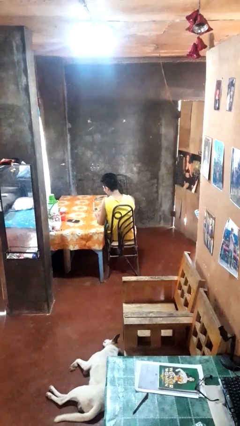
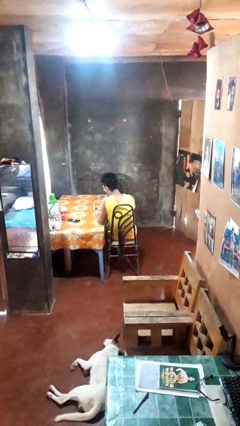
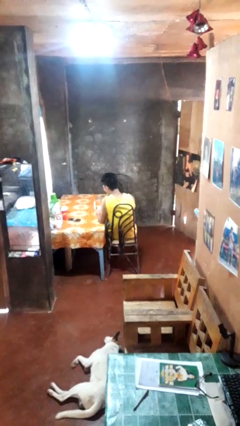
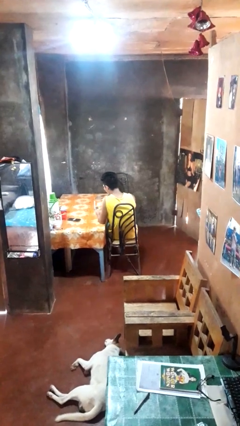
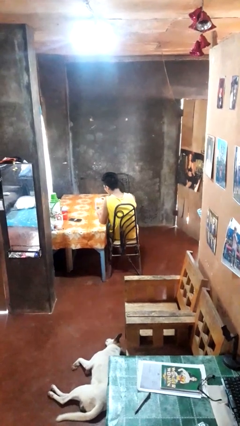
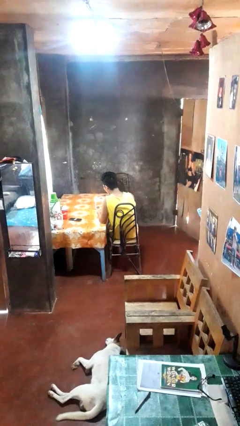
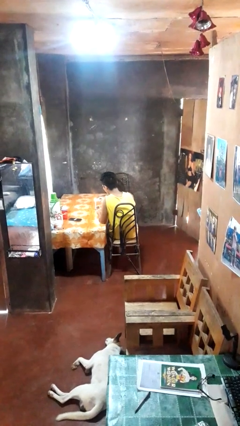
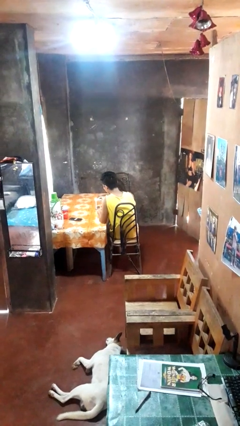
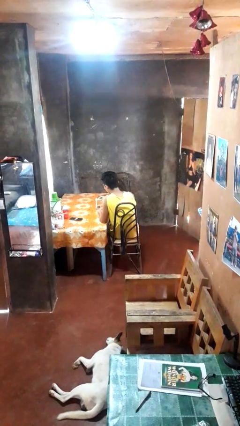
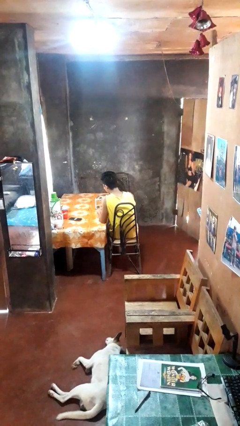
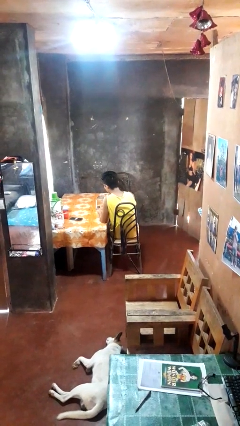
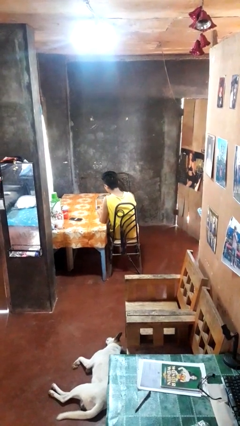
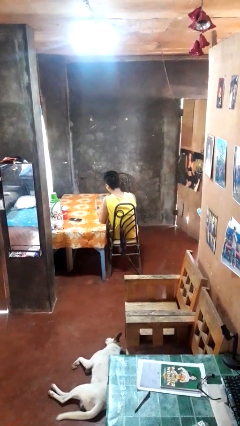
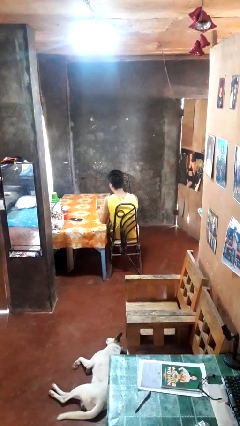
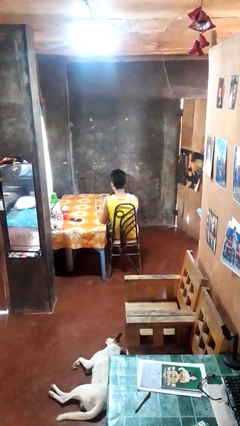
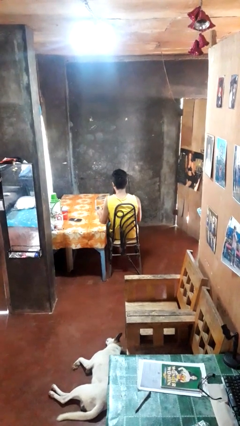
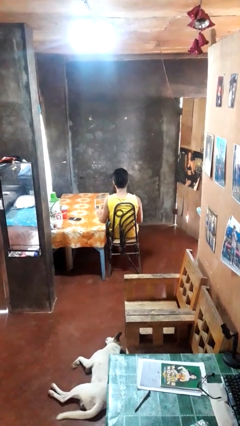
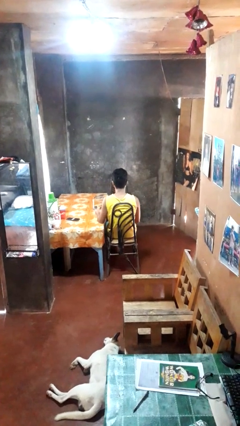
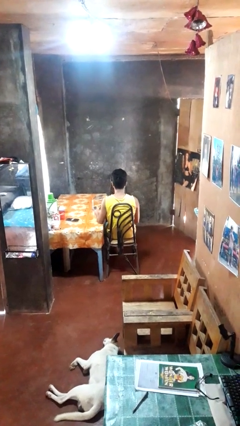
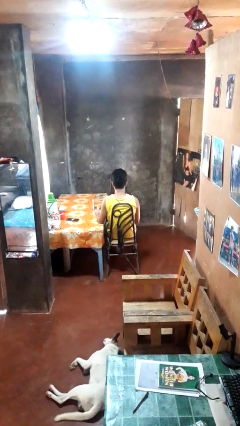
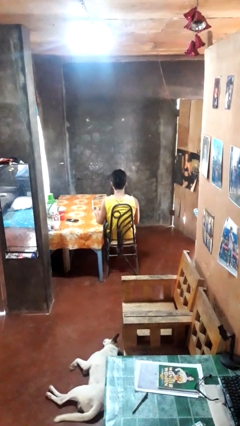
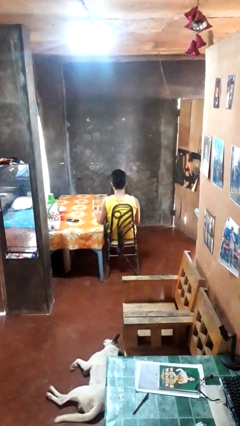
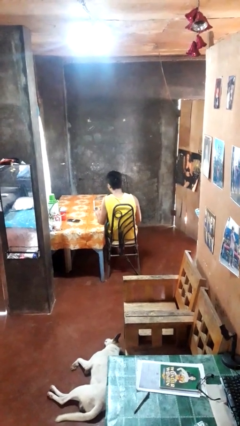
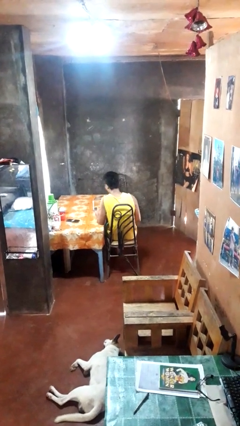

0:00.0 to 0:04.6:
person lights candle

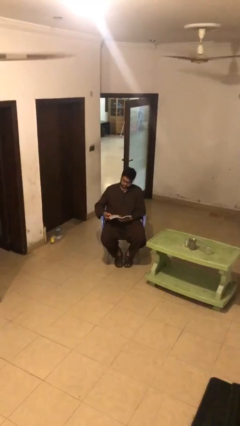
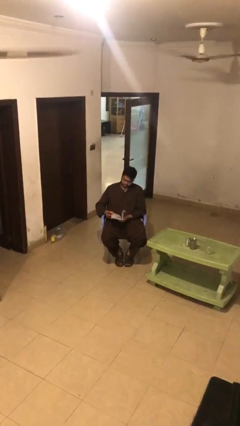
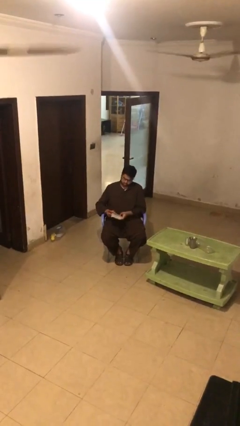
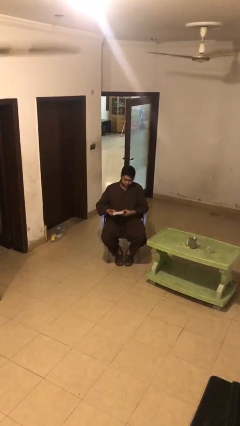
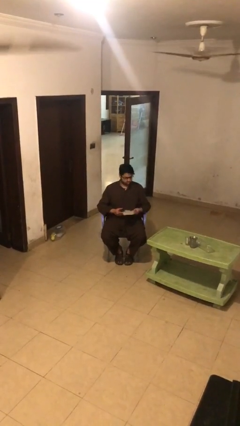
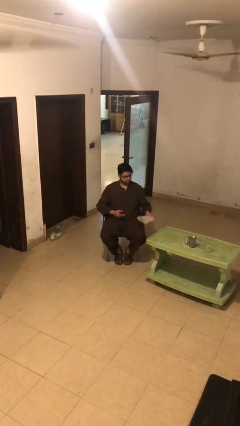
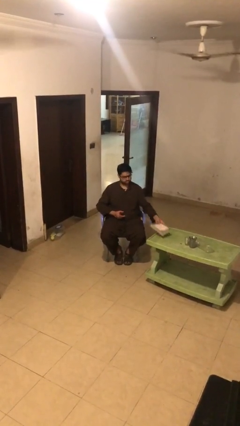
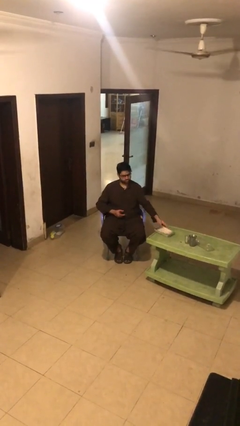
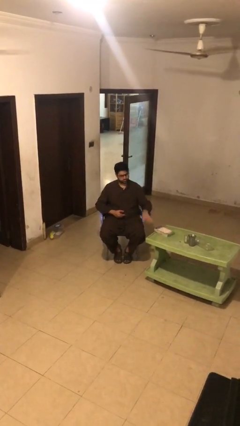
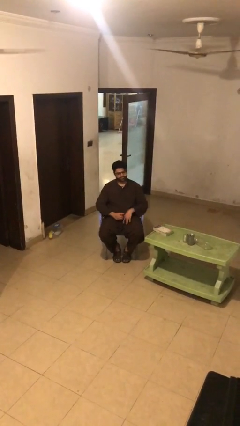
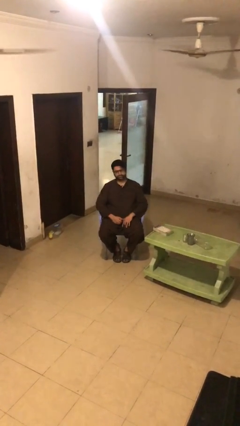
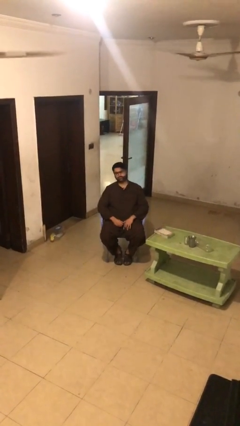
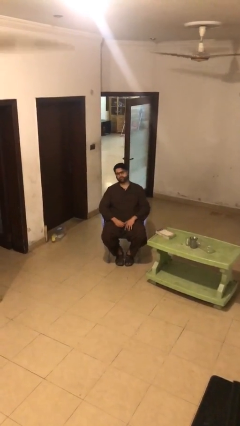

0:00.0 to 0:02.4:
person puts down object on table

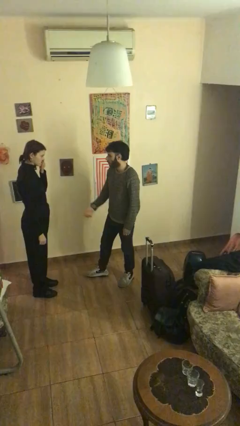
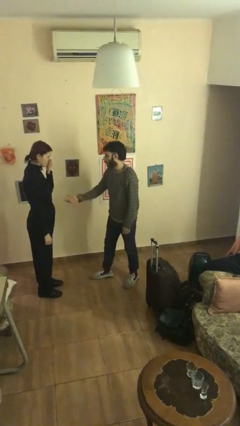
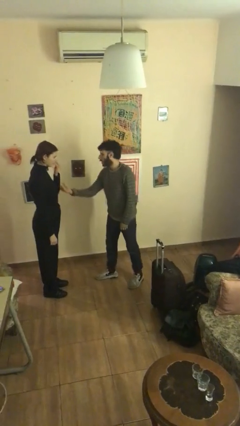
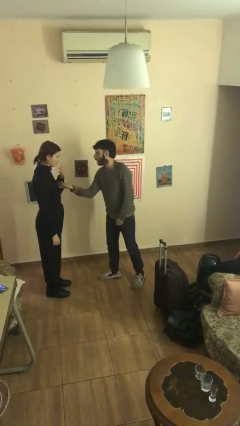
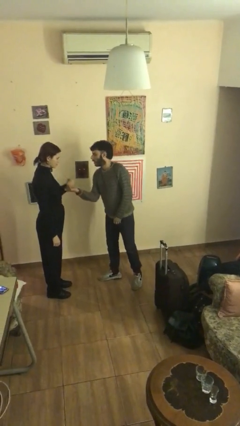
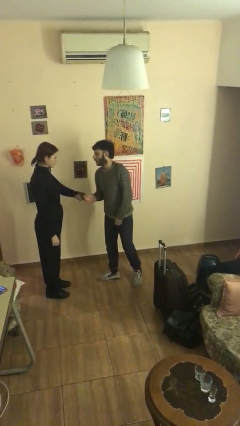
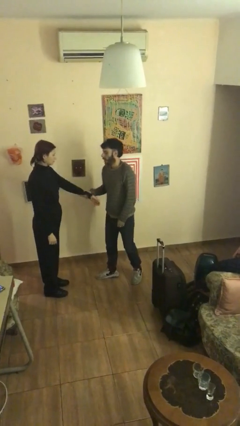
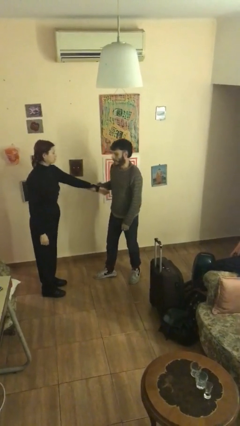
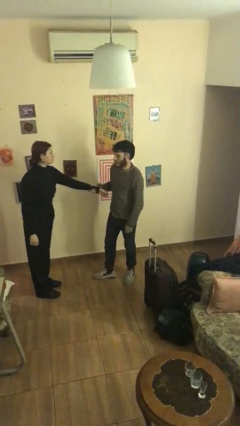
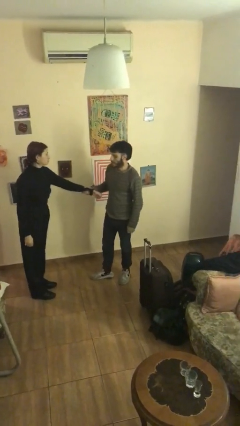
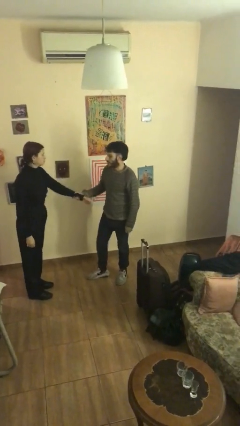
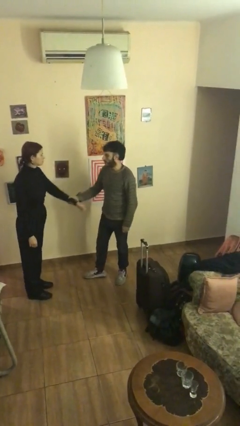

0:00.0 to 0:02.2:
person grabs person by forearm

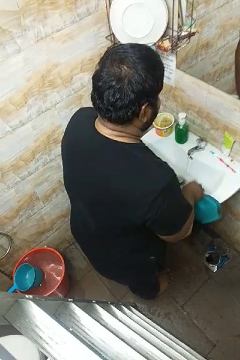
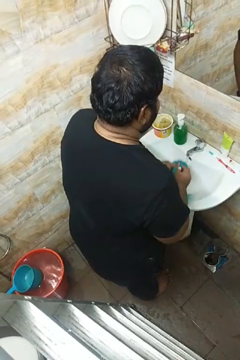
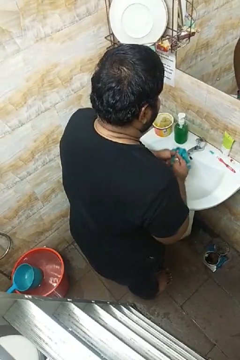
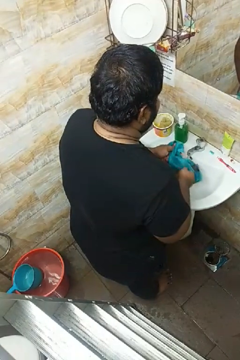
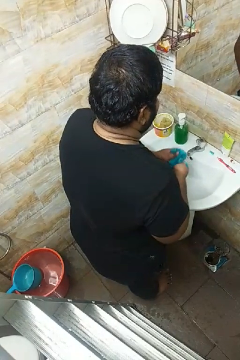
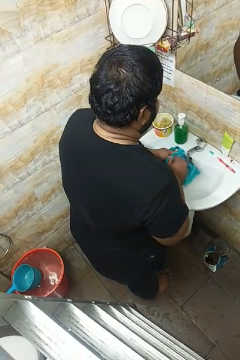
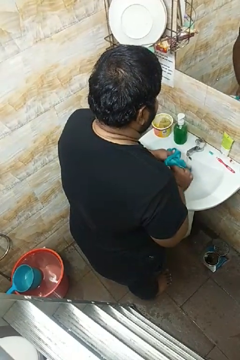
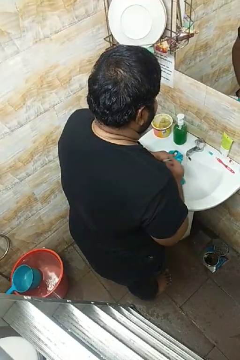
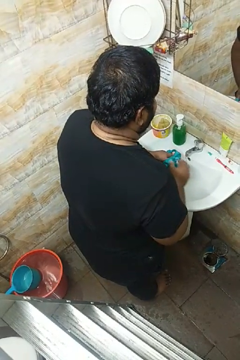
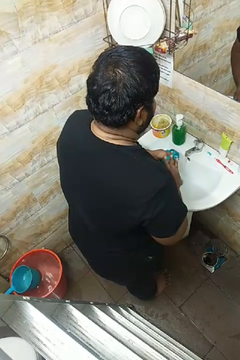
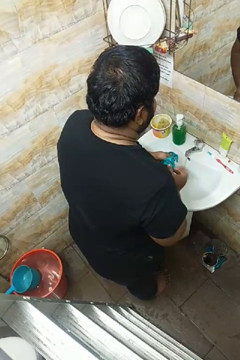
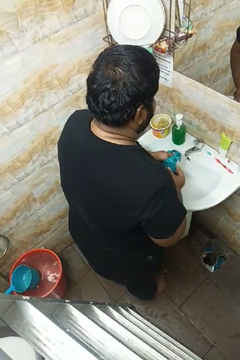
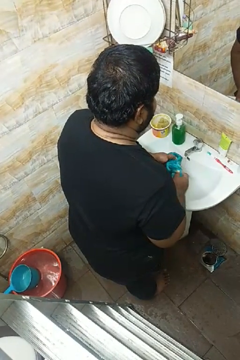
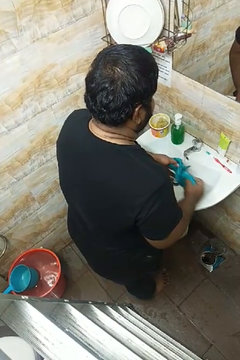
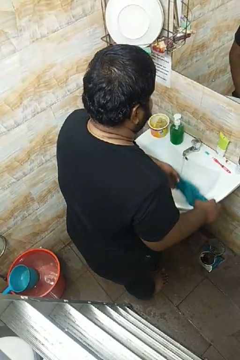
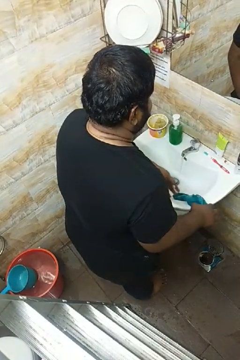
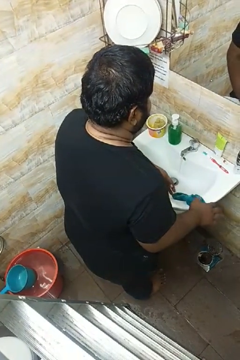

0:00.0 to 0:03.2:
person dries hands with towel

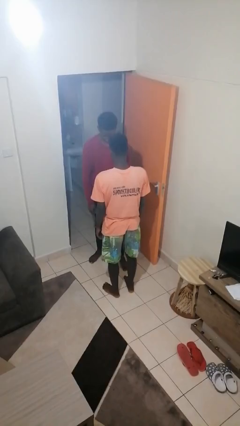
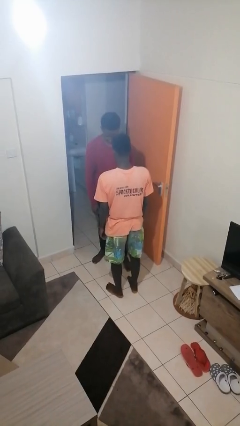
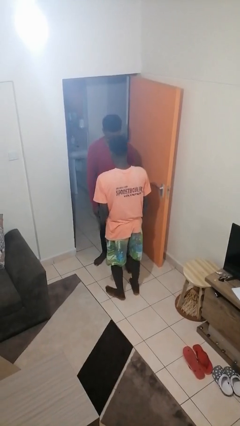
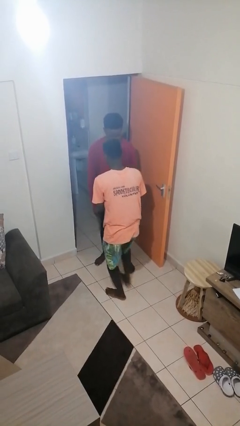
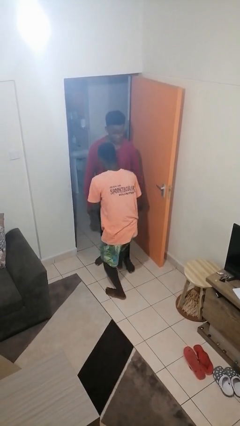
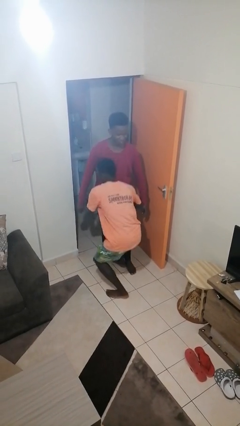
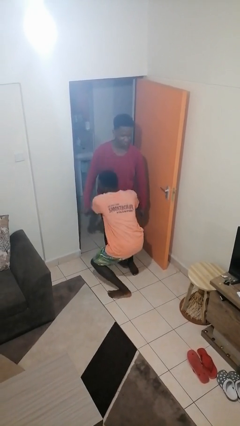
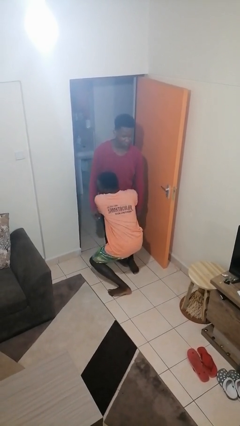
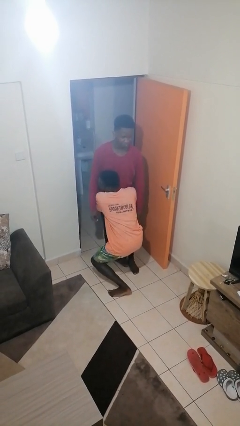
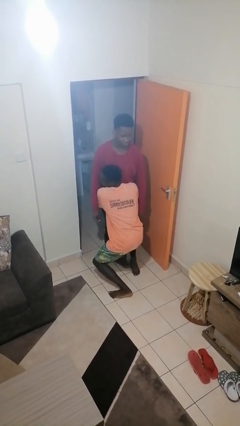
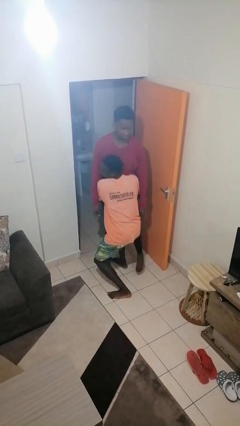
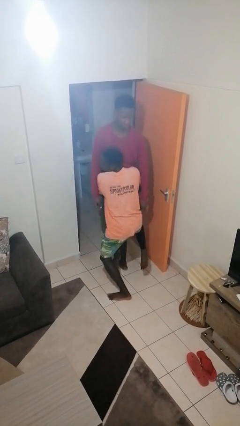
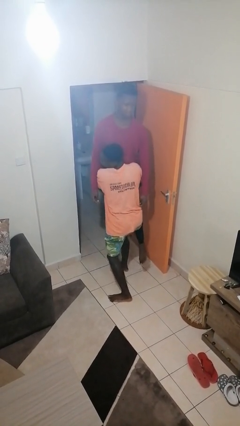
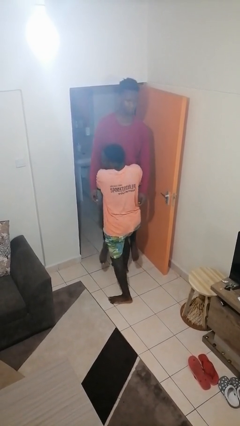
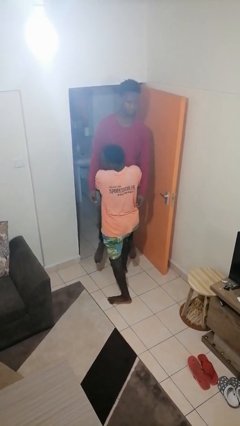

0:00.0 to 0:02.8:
person picks up person

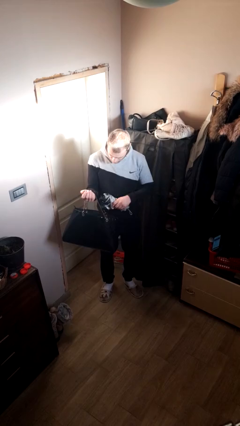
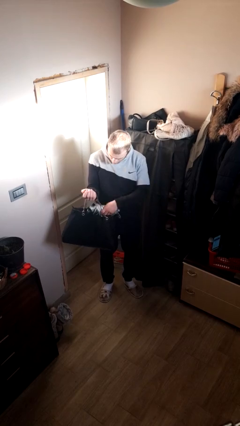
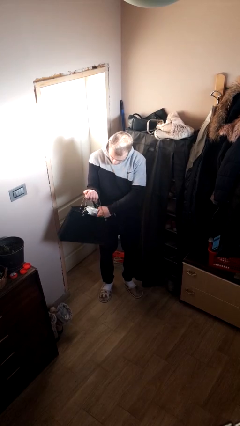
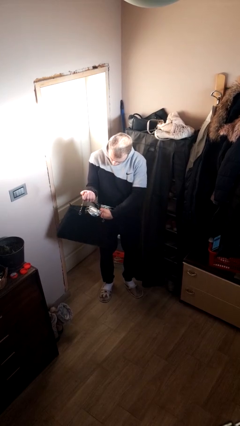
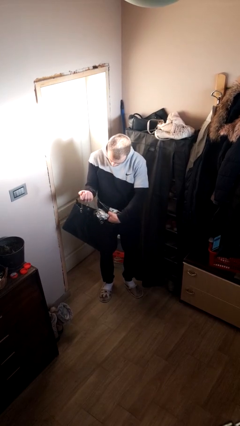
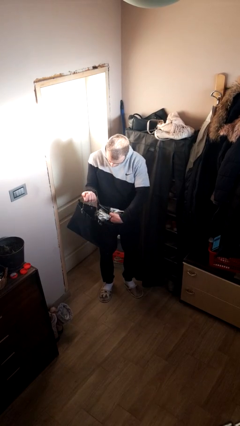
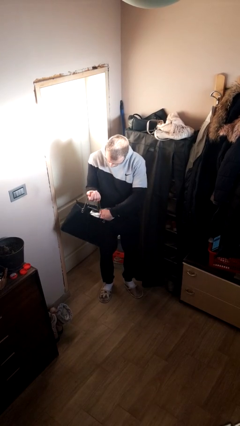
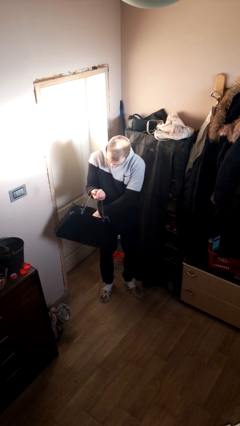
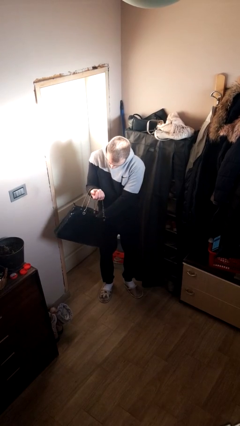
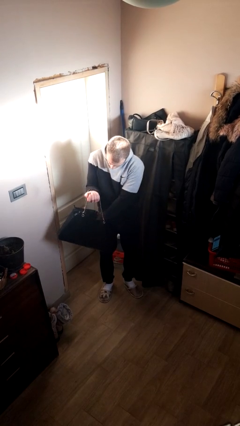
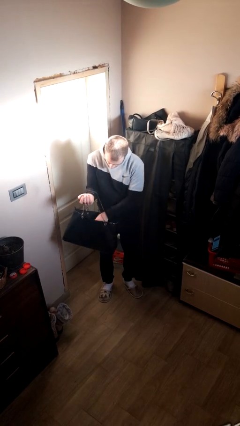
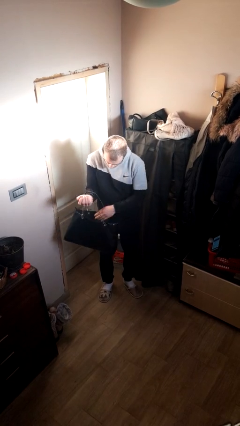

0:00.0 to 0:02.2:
person puts object into purse

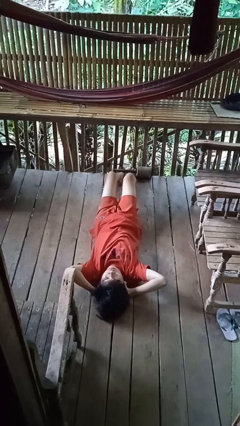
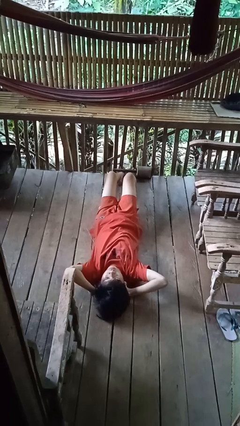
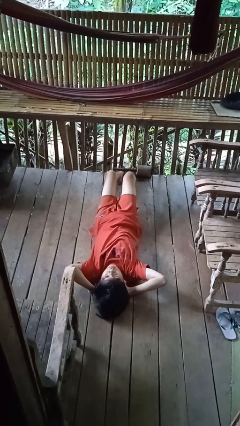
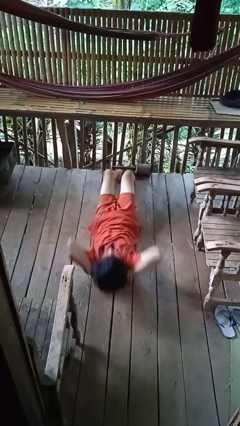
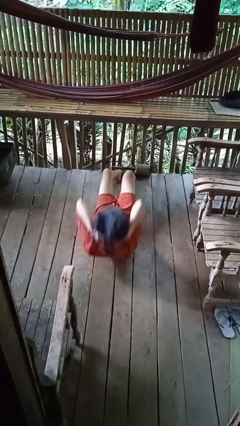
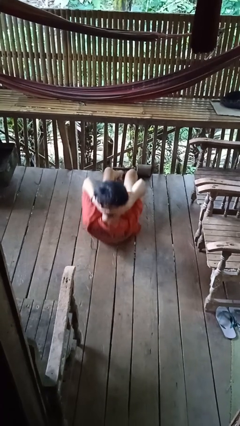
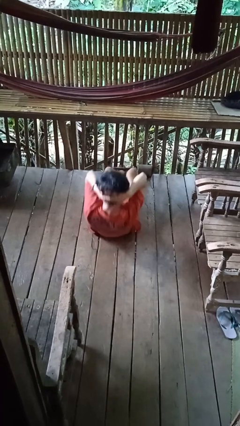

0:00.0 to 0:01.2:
person exercises with situp
